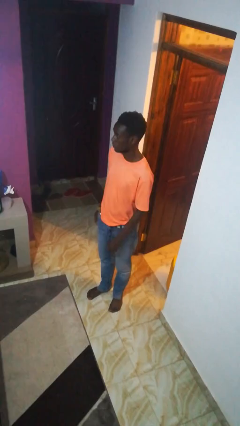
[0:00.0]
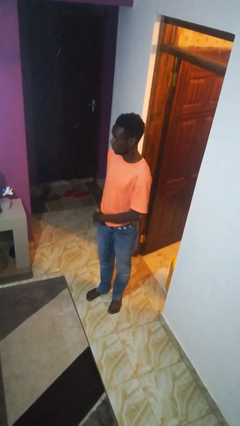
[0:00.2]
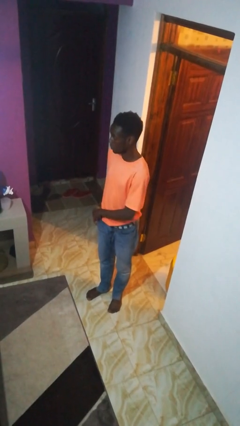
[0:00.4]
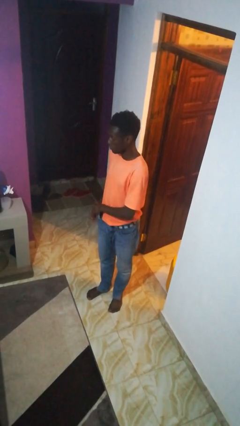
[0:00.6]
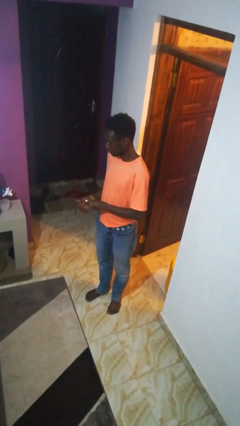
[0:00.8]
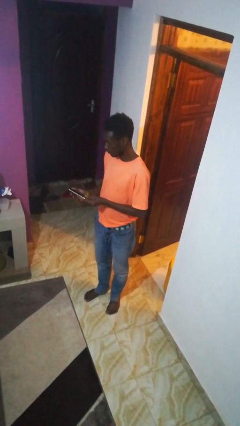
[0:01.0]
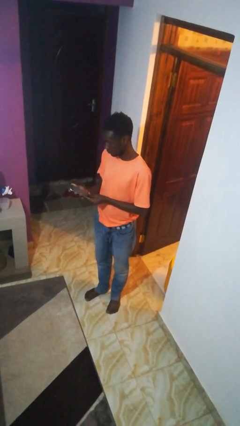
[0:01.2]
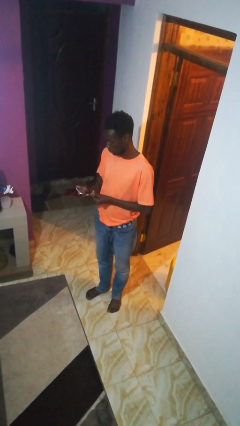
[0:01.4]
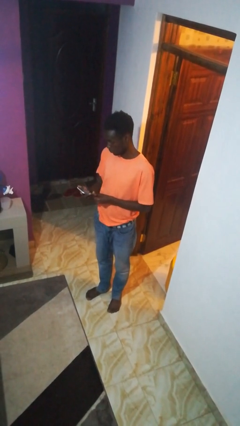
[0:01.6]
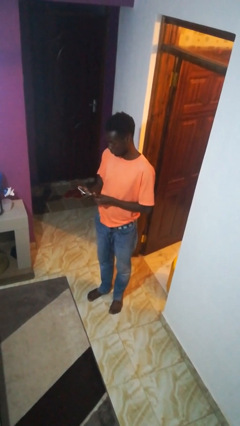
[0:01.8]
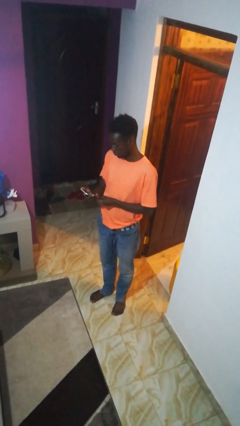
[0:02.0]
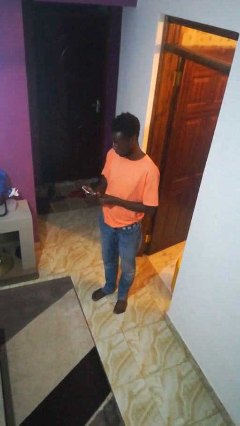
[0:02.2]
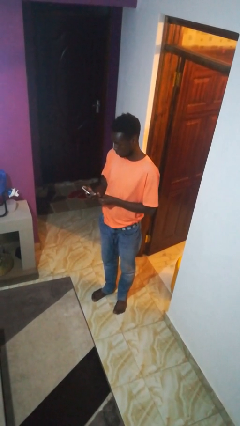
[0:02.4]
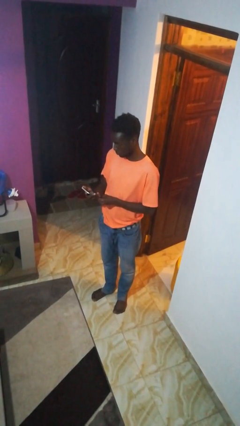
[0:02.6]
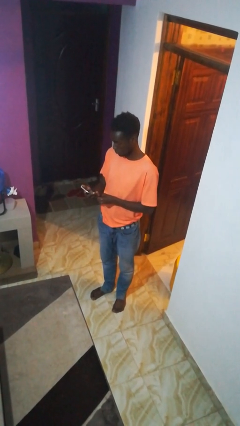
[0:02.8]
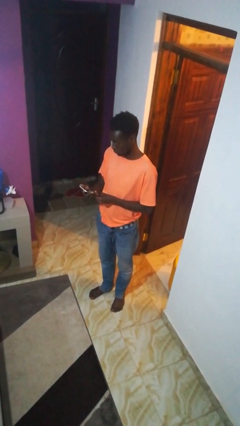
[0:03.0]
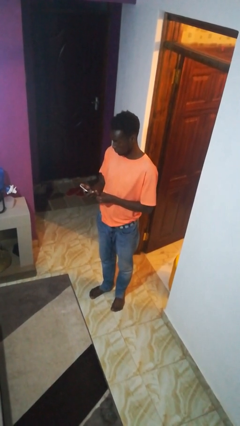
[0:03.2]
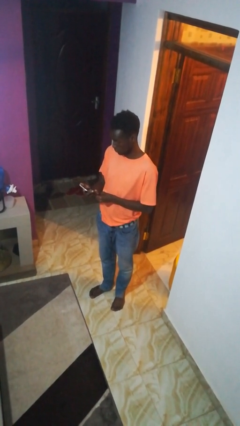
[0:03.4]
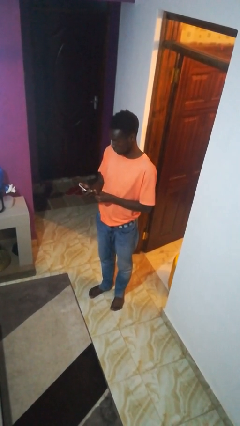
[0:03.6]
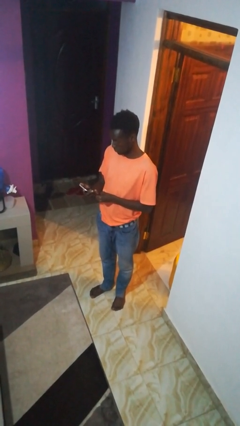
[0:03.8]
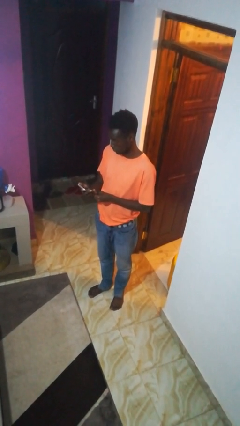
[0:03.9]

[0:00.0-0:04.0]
person takes phone from pocket

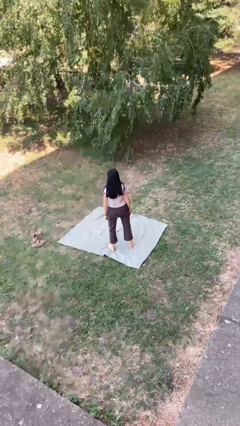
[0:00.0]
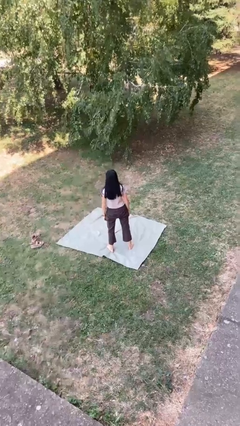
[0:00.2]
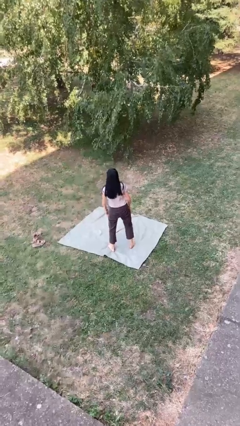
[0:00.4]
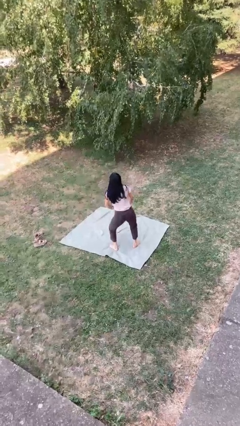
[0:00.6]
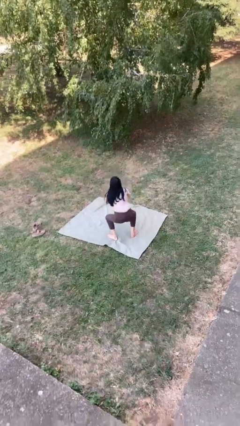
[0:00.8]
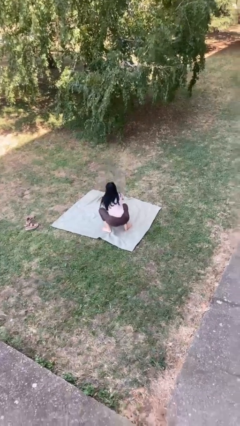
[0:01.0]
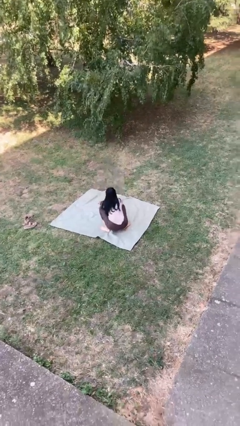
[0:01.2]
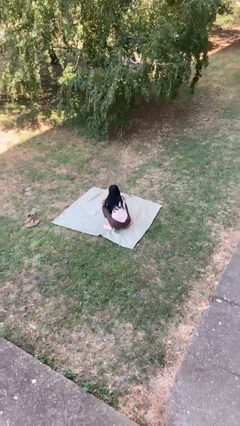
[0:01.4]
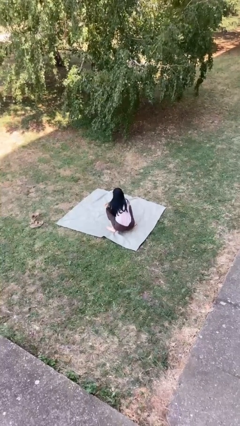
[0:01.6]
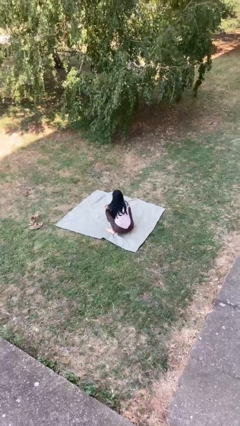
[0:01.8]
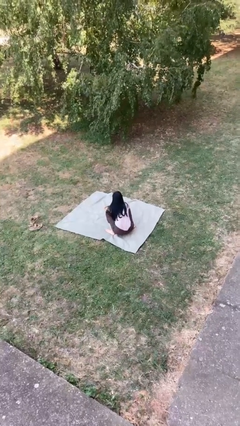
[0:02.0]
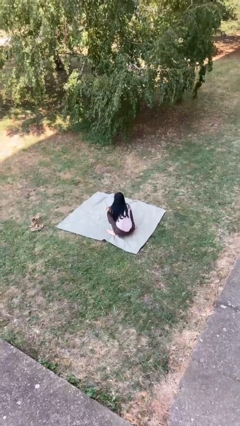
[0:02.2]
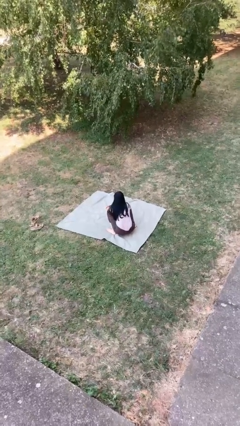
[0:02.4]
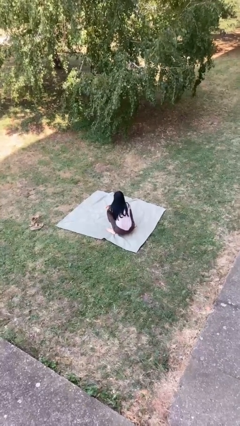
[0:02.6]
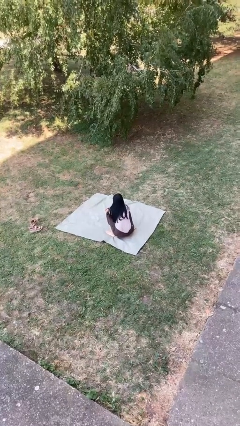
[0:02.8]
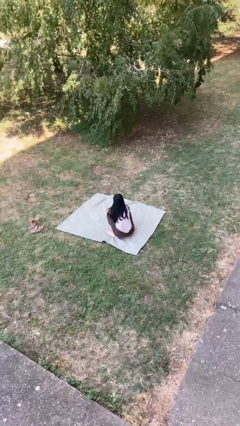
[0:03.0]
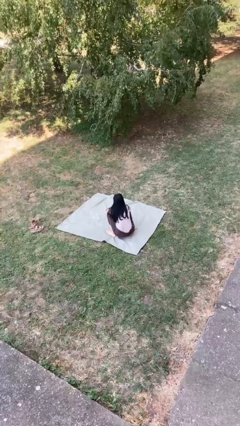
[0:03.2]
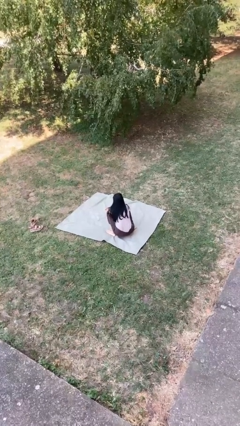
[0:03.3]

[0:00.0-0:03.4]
person squats

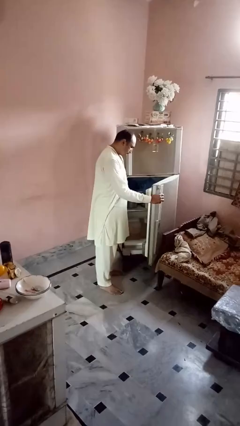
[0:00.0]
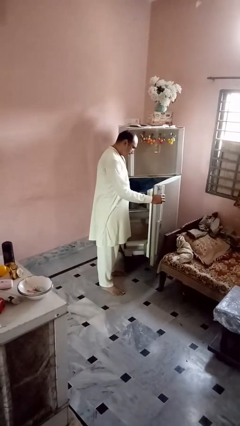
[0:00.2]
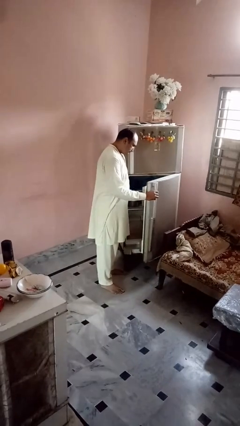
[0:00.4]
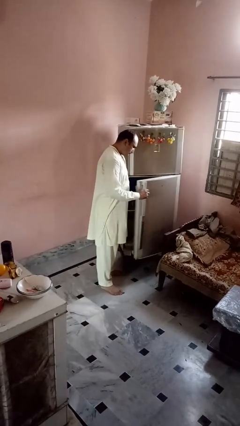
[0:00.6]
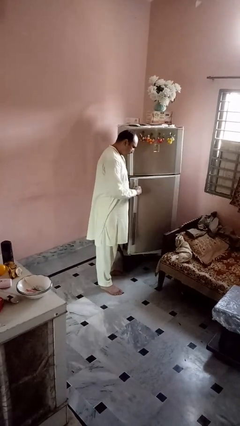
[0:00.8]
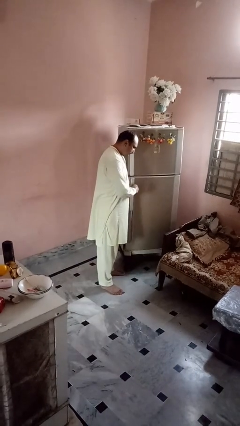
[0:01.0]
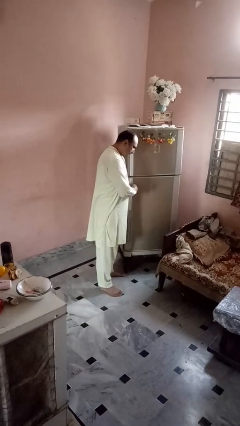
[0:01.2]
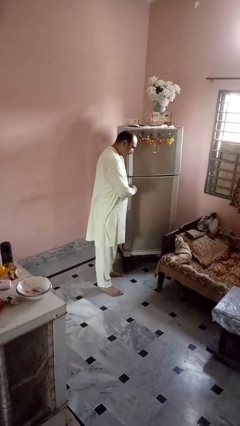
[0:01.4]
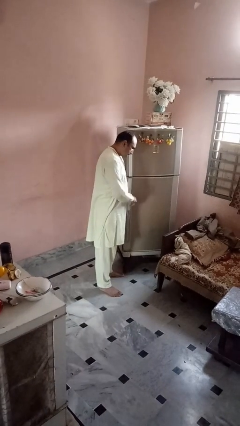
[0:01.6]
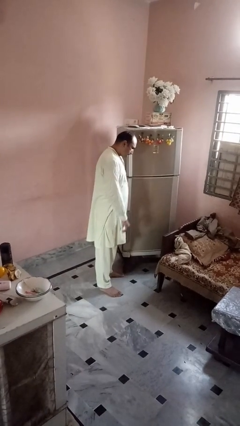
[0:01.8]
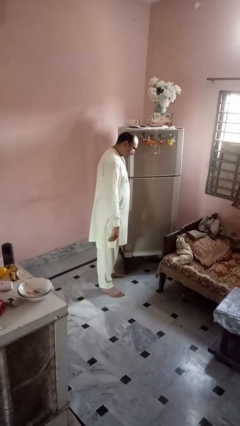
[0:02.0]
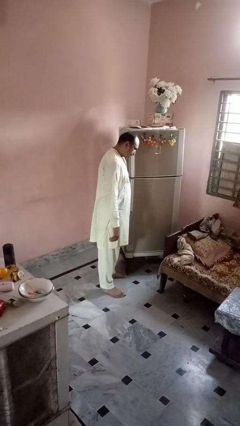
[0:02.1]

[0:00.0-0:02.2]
person closes refrigerator

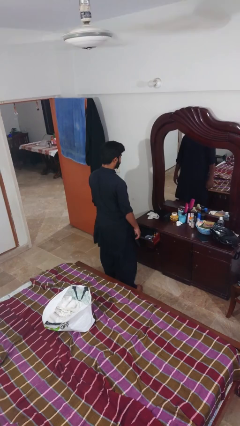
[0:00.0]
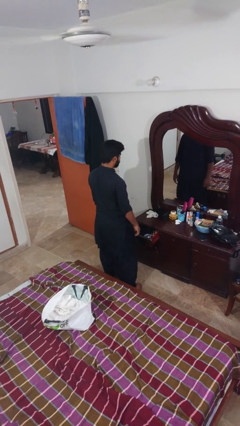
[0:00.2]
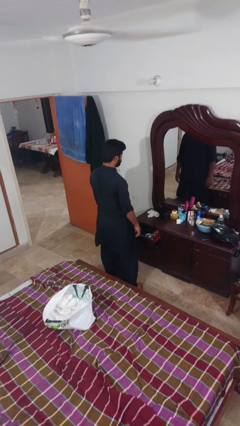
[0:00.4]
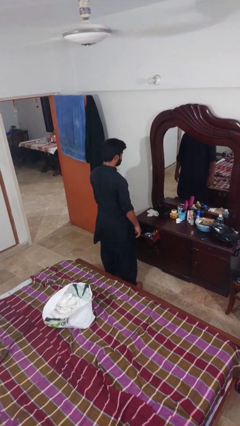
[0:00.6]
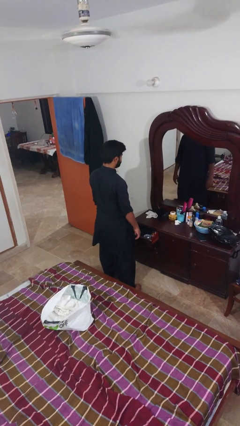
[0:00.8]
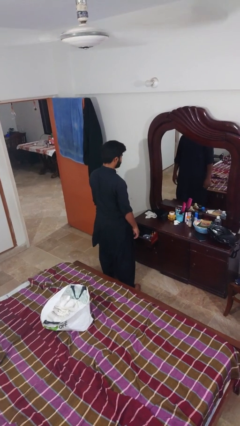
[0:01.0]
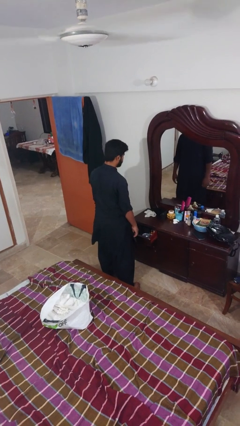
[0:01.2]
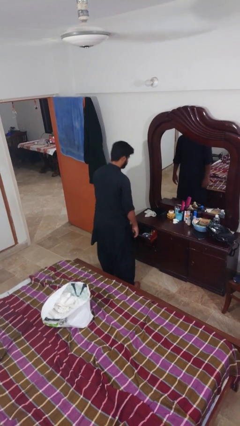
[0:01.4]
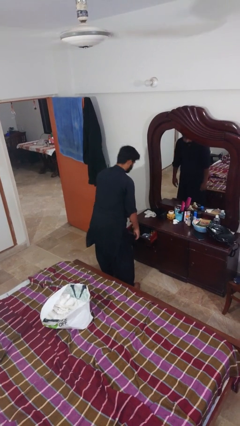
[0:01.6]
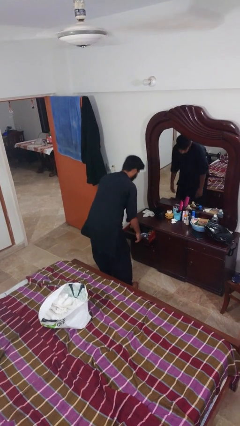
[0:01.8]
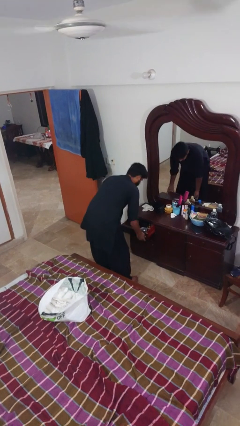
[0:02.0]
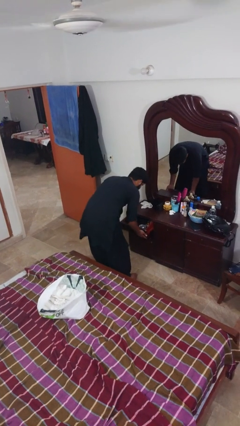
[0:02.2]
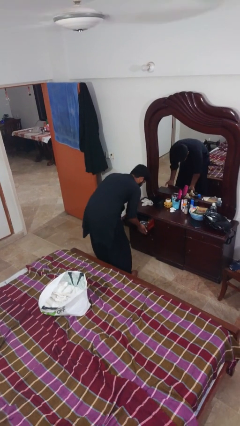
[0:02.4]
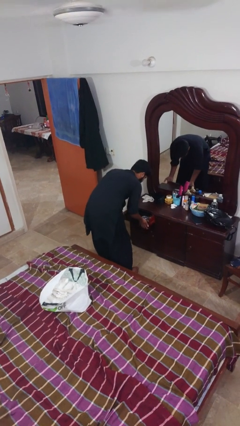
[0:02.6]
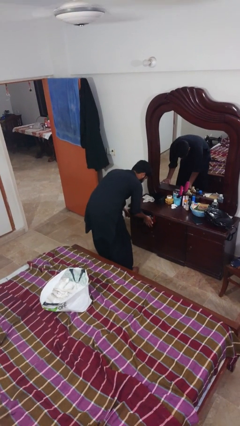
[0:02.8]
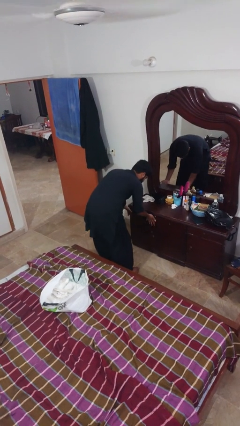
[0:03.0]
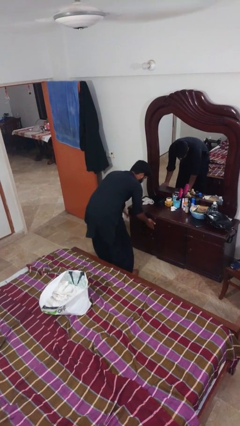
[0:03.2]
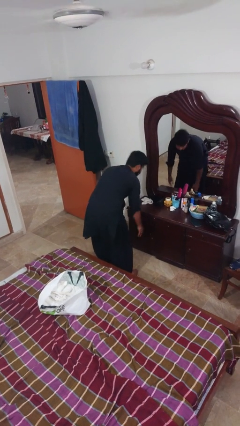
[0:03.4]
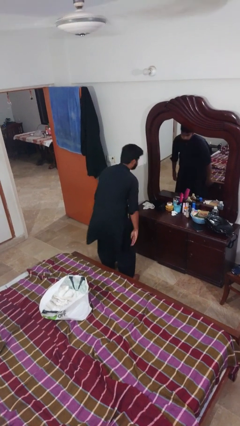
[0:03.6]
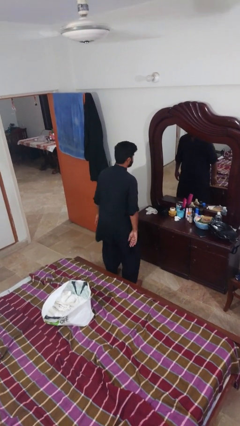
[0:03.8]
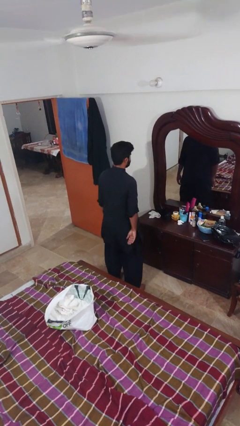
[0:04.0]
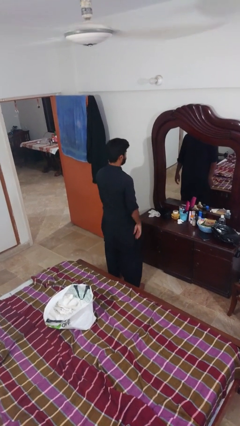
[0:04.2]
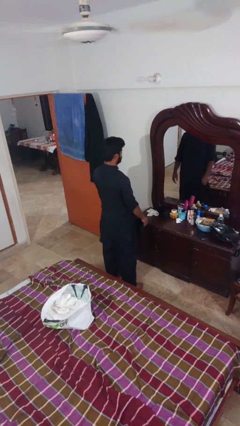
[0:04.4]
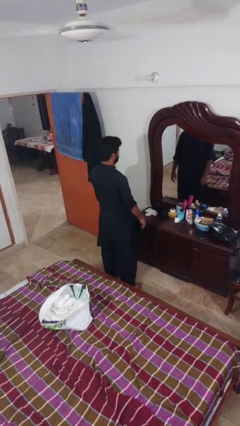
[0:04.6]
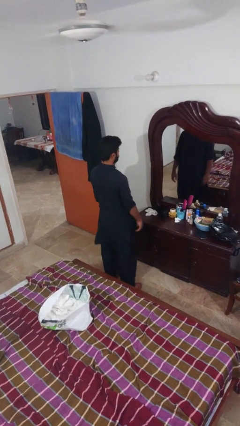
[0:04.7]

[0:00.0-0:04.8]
person closes dresser drawer

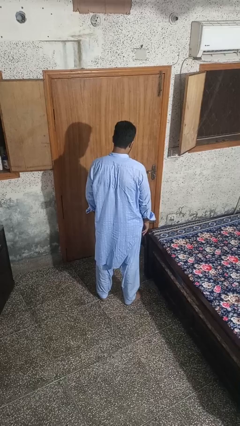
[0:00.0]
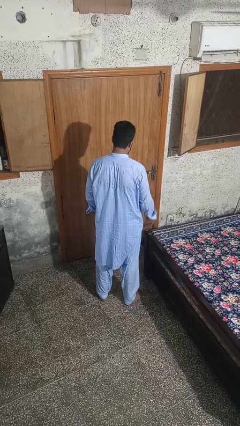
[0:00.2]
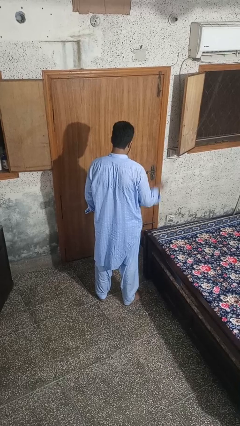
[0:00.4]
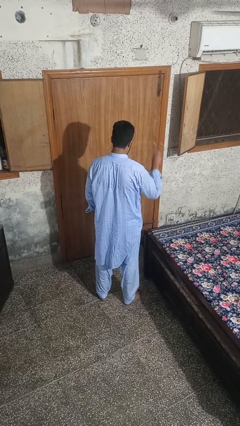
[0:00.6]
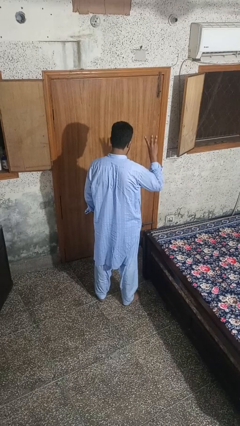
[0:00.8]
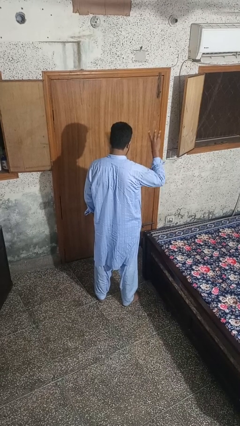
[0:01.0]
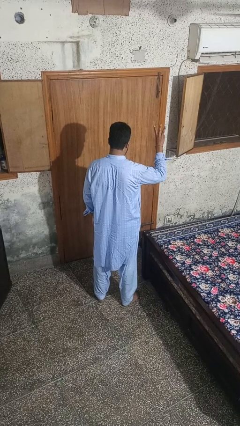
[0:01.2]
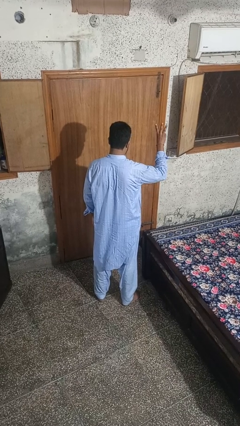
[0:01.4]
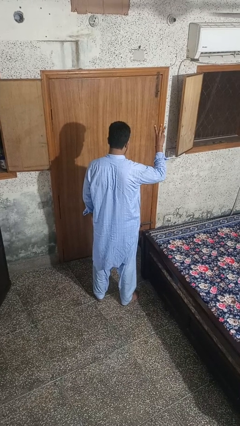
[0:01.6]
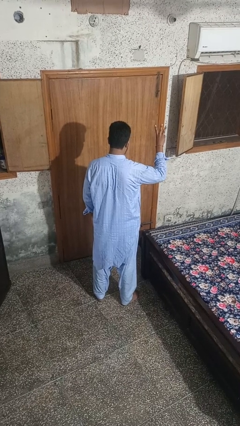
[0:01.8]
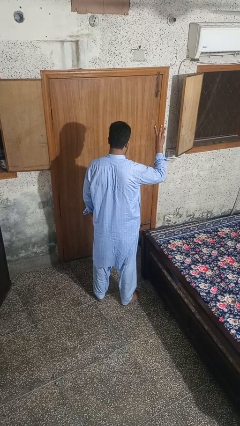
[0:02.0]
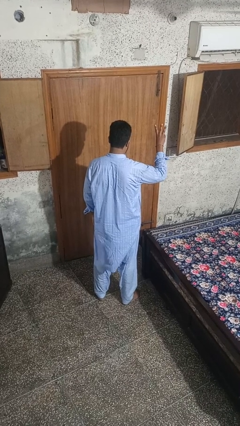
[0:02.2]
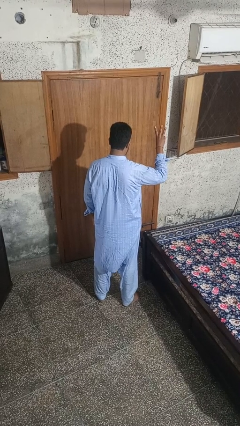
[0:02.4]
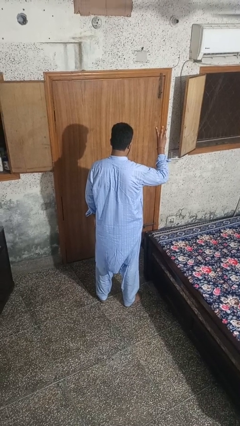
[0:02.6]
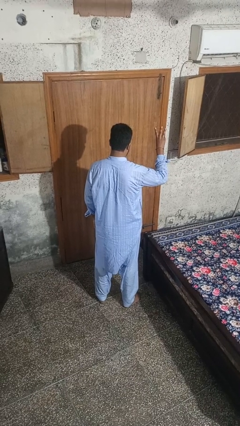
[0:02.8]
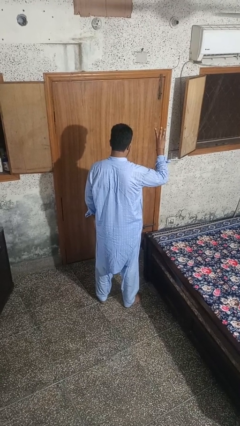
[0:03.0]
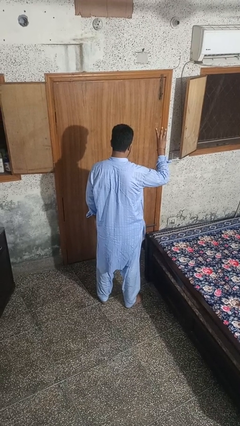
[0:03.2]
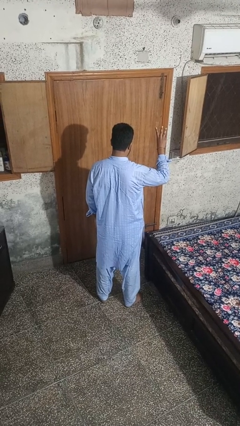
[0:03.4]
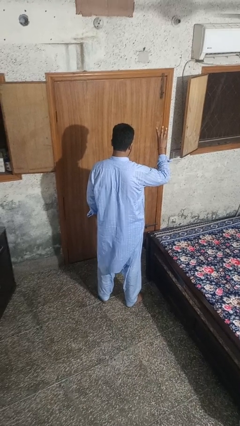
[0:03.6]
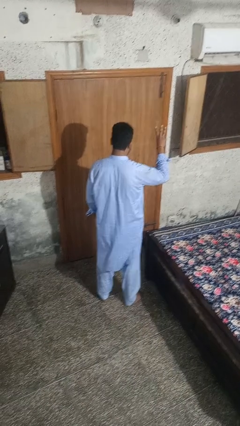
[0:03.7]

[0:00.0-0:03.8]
person gestures number three
